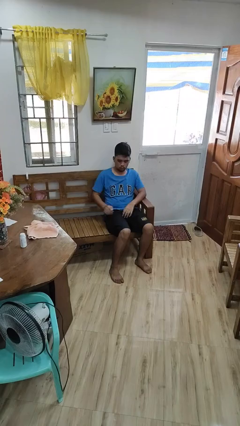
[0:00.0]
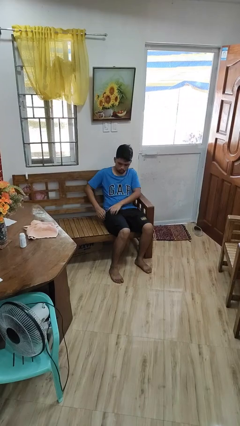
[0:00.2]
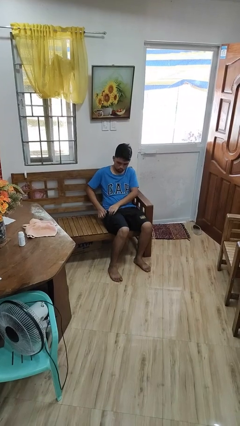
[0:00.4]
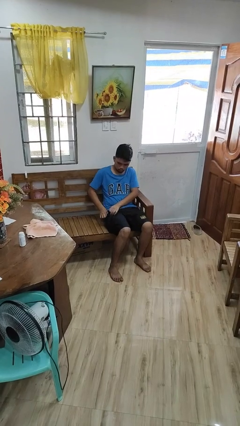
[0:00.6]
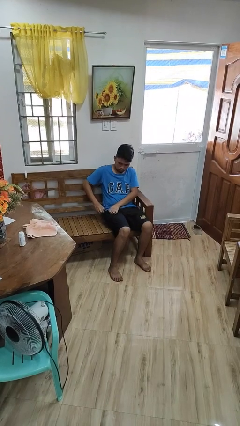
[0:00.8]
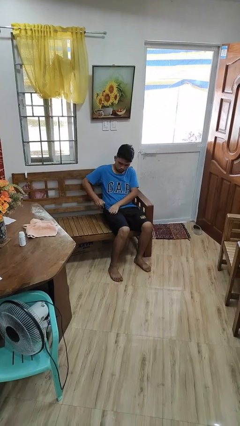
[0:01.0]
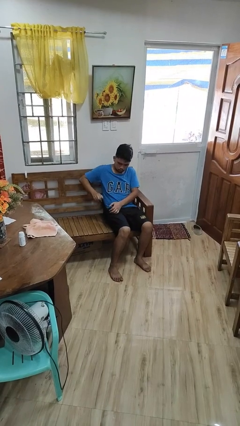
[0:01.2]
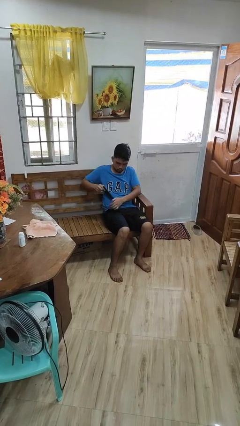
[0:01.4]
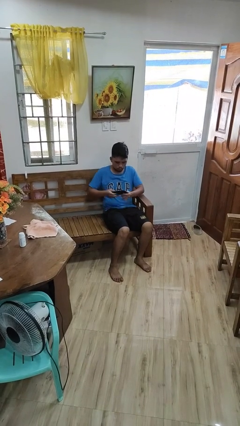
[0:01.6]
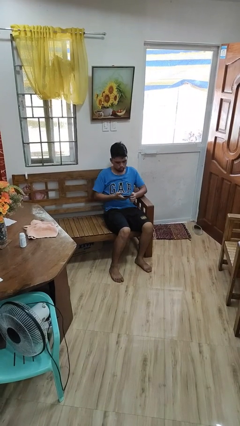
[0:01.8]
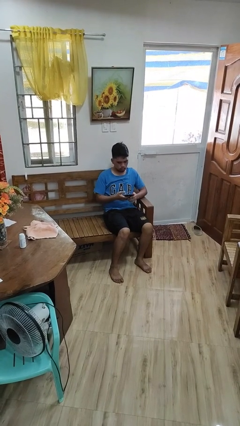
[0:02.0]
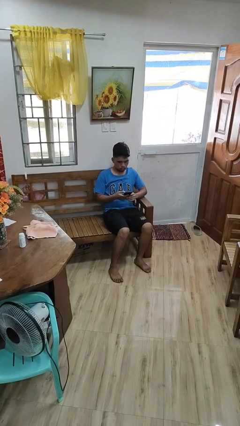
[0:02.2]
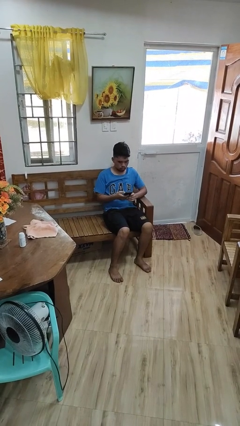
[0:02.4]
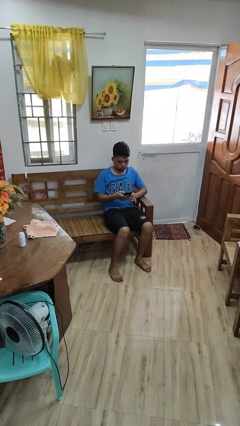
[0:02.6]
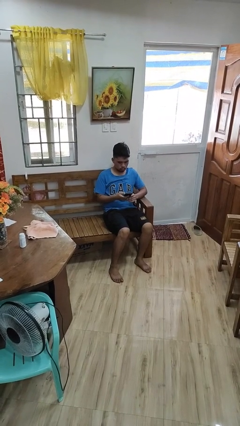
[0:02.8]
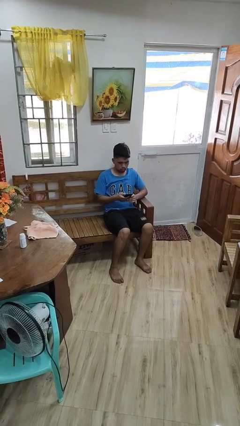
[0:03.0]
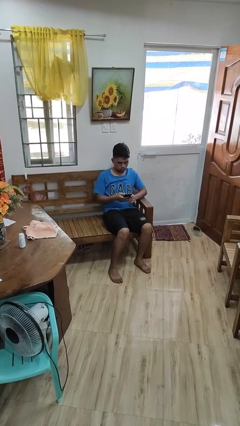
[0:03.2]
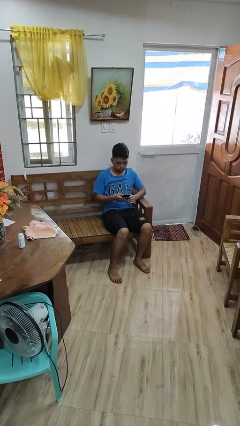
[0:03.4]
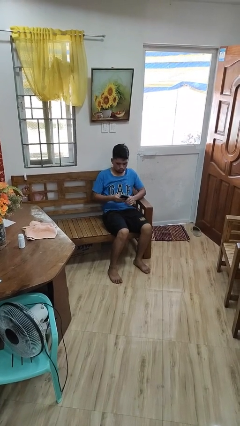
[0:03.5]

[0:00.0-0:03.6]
person takes phone from pocket

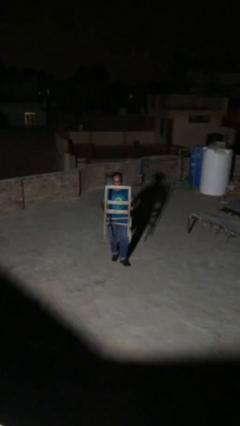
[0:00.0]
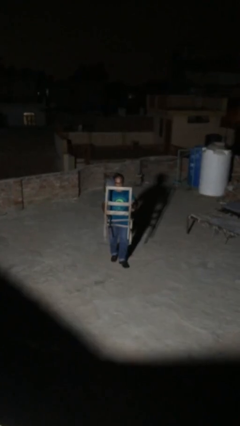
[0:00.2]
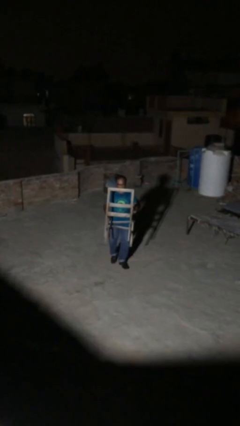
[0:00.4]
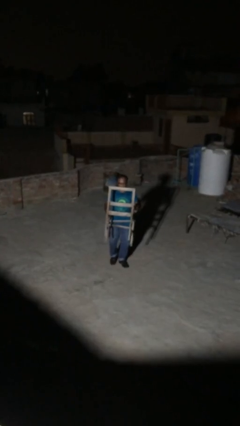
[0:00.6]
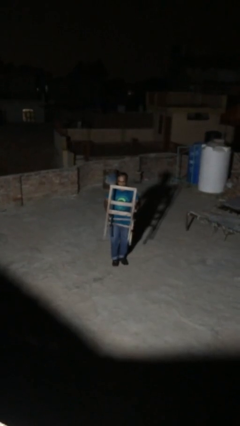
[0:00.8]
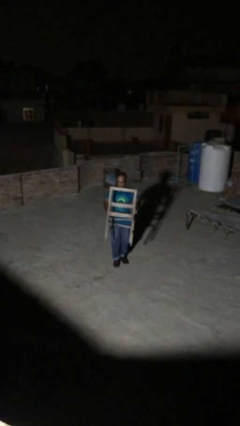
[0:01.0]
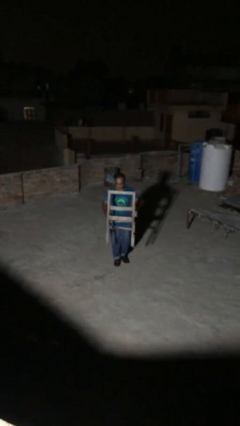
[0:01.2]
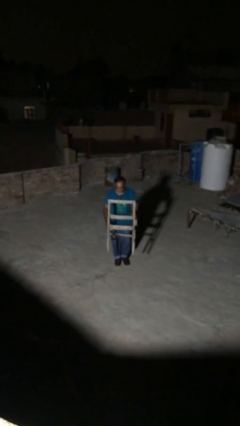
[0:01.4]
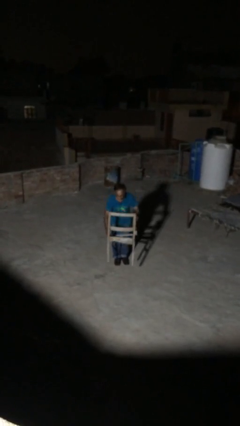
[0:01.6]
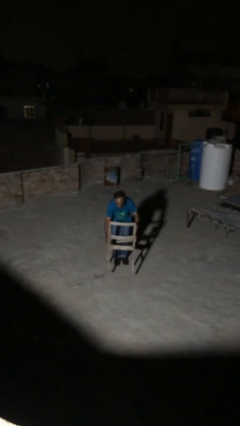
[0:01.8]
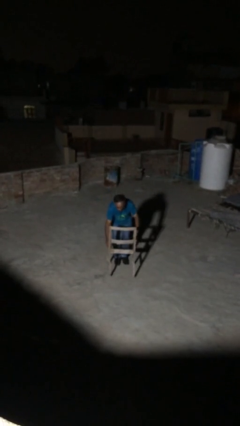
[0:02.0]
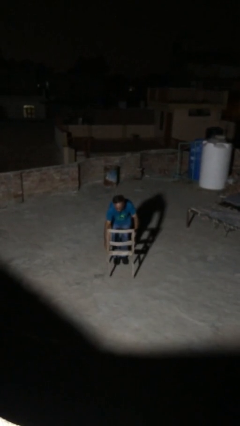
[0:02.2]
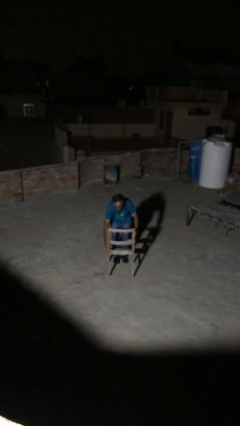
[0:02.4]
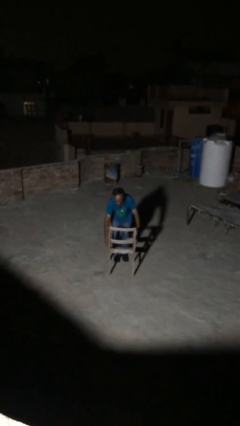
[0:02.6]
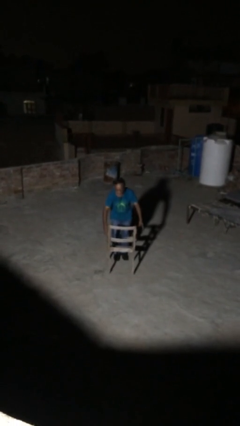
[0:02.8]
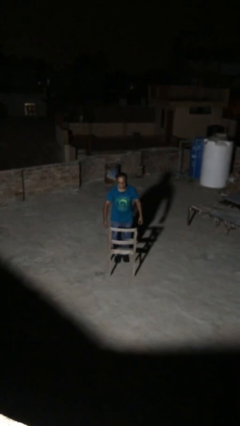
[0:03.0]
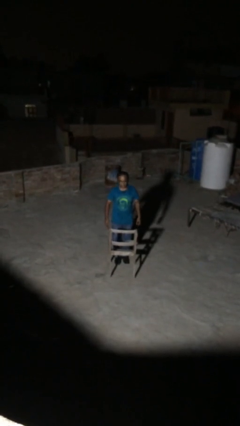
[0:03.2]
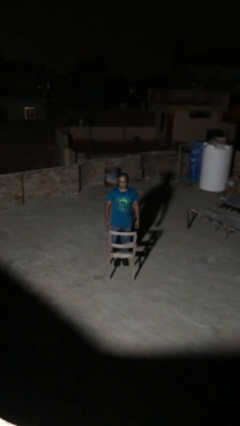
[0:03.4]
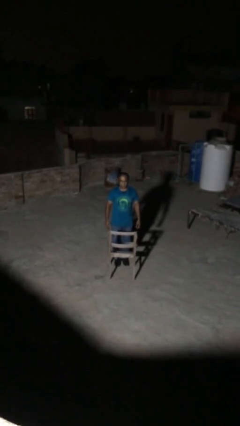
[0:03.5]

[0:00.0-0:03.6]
person puts down object on floor

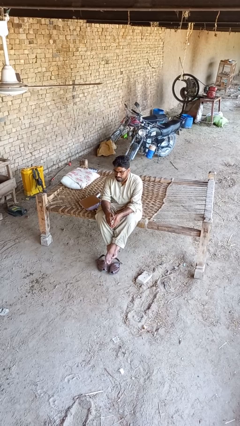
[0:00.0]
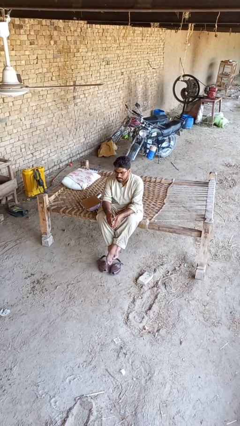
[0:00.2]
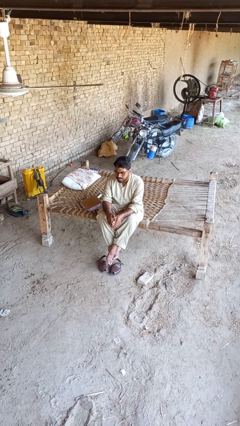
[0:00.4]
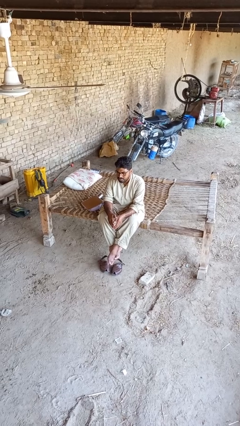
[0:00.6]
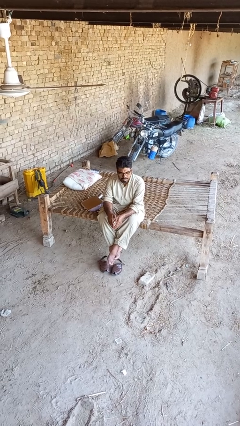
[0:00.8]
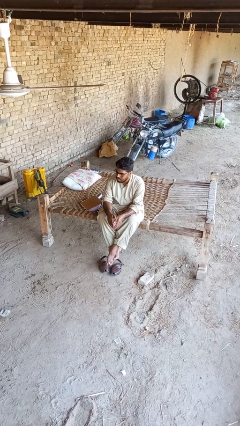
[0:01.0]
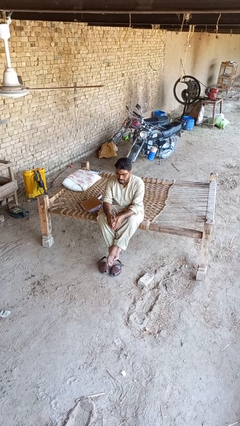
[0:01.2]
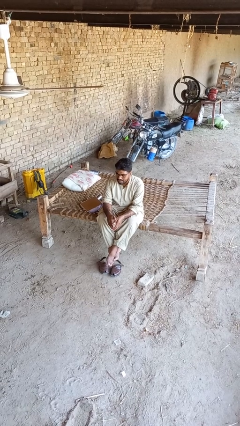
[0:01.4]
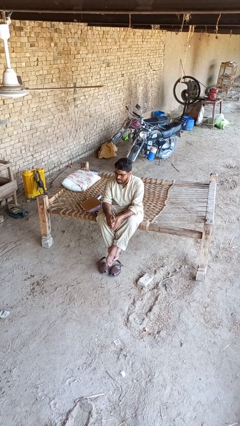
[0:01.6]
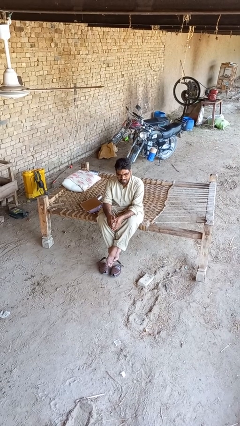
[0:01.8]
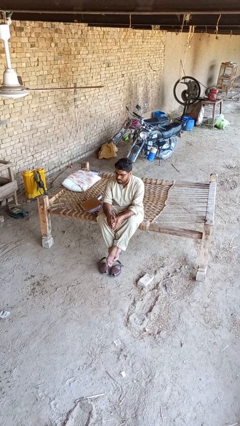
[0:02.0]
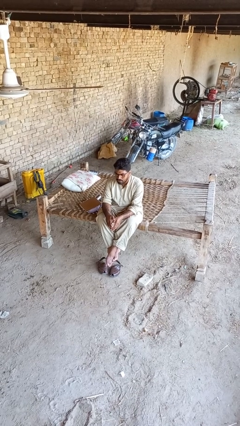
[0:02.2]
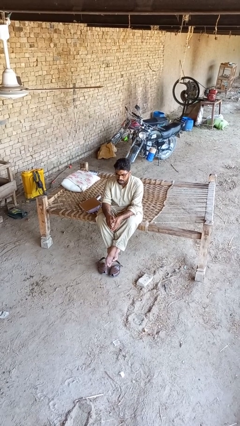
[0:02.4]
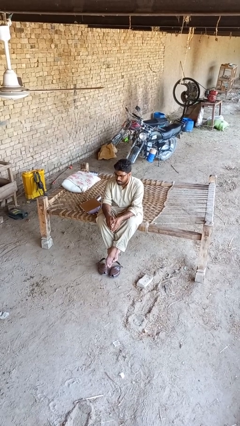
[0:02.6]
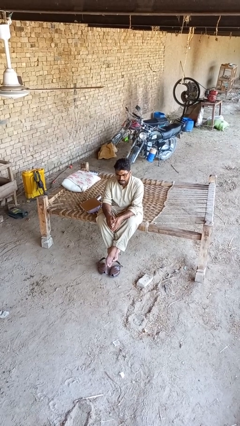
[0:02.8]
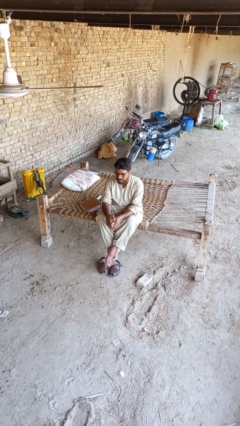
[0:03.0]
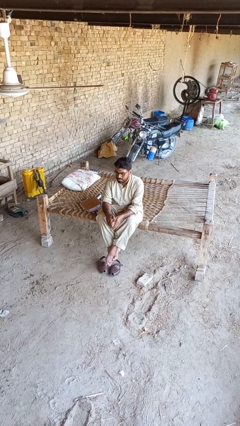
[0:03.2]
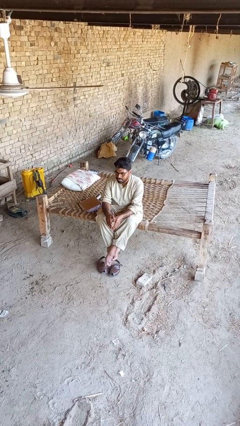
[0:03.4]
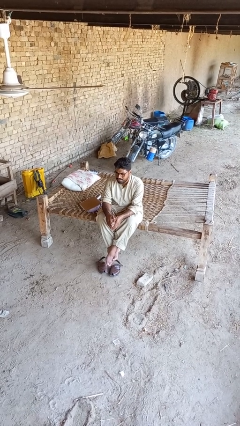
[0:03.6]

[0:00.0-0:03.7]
person shakes head

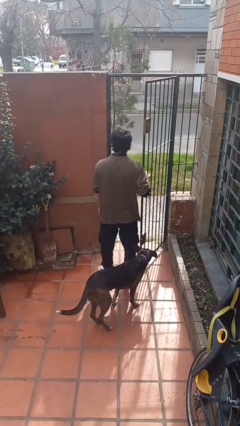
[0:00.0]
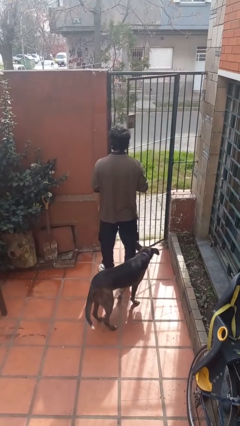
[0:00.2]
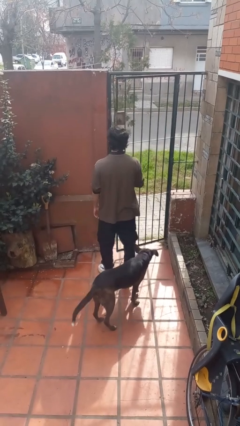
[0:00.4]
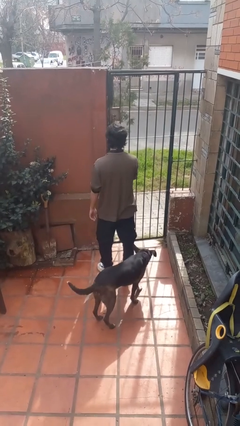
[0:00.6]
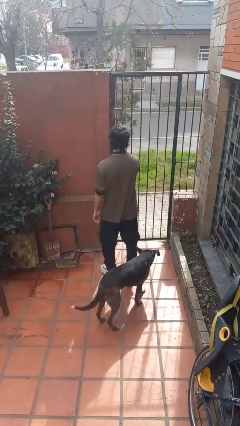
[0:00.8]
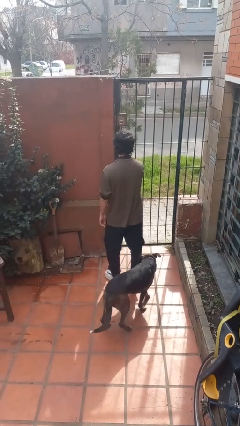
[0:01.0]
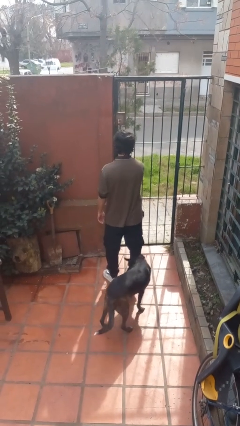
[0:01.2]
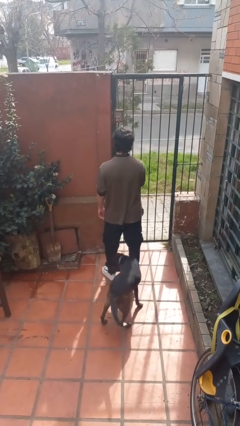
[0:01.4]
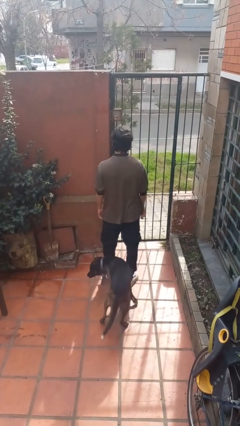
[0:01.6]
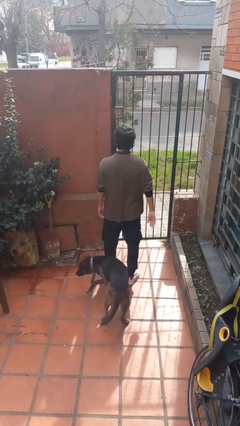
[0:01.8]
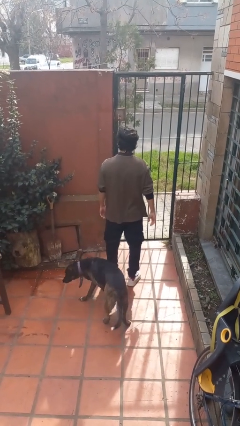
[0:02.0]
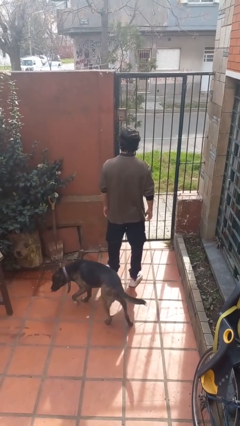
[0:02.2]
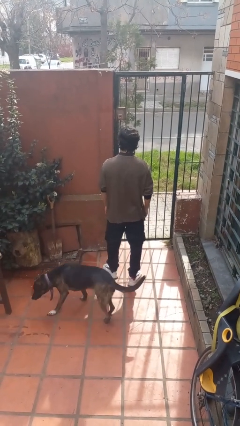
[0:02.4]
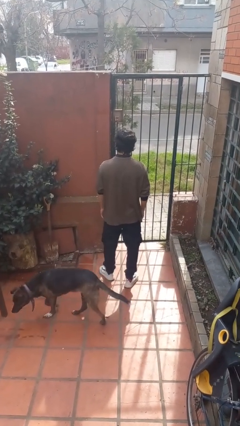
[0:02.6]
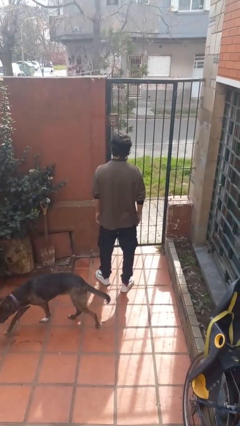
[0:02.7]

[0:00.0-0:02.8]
person closes gate

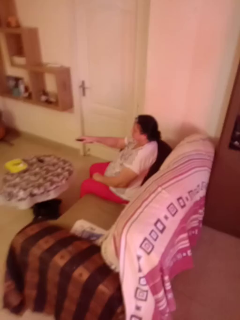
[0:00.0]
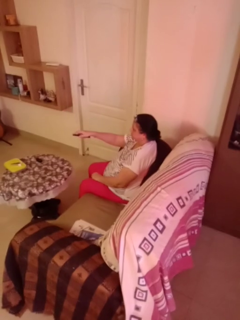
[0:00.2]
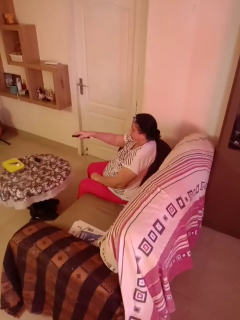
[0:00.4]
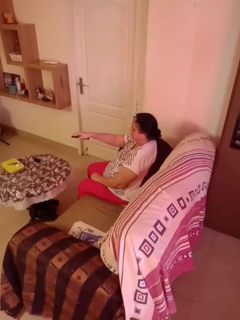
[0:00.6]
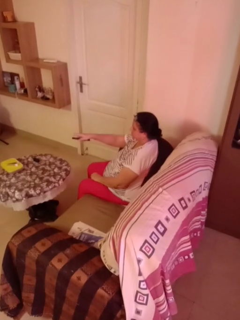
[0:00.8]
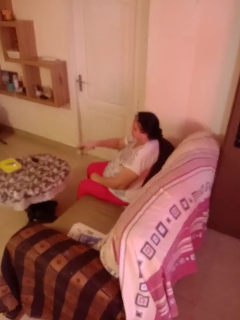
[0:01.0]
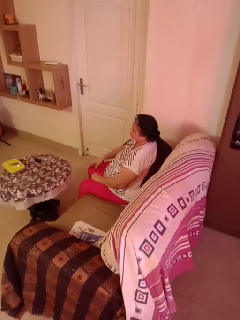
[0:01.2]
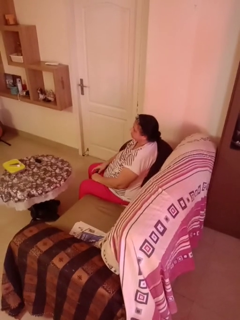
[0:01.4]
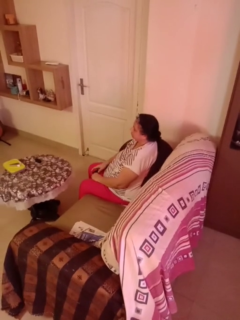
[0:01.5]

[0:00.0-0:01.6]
person uses television remote

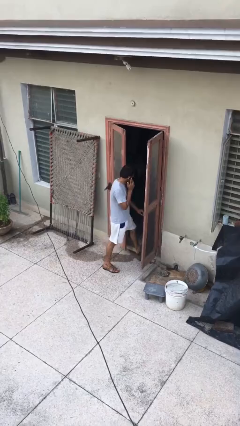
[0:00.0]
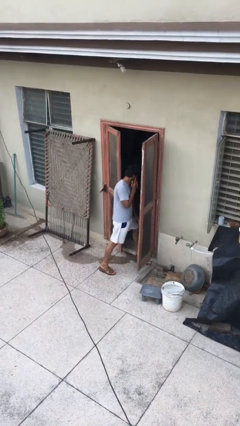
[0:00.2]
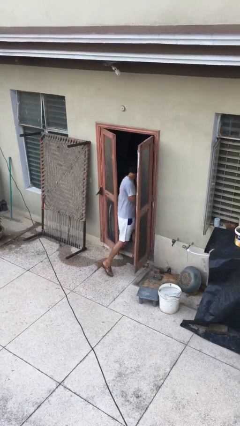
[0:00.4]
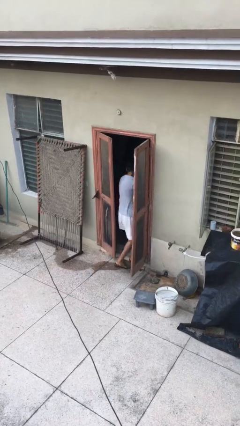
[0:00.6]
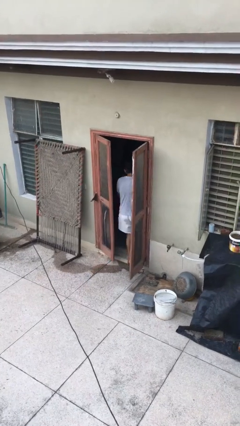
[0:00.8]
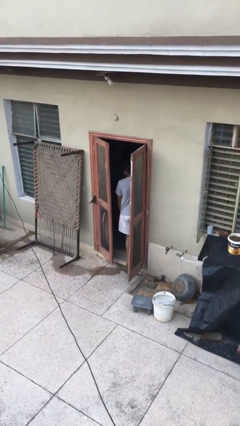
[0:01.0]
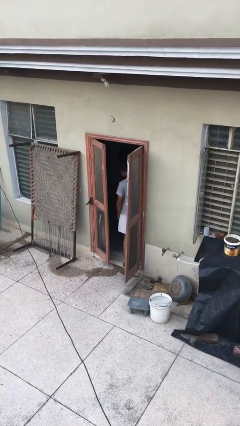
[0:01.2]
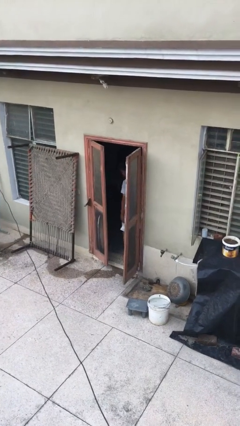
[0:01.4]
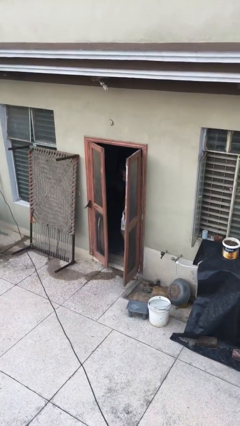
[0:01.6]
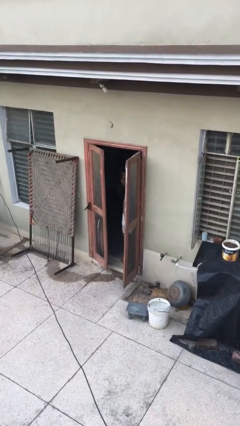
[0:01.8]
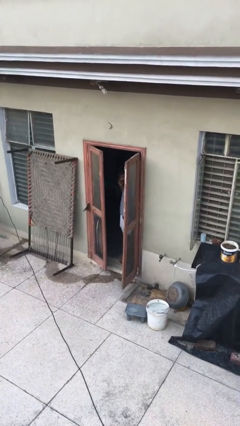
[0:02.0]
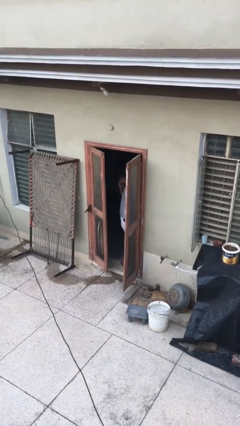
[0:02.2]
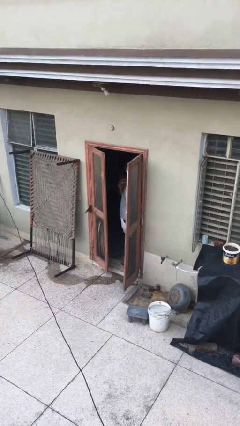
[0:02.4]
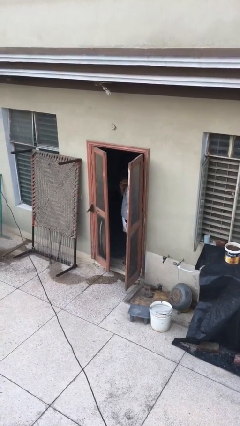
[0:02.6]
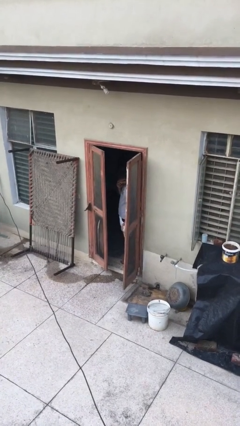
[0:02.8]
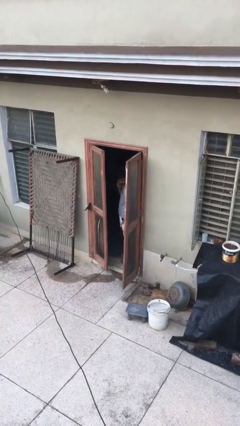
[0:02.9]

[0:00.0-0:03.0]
person exits scene through structure
